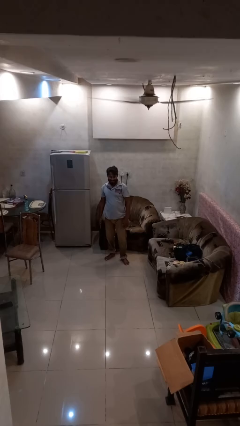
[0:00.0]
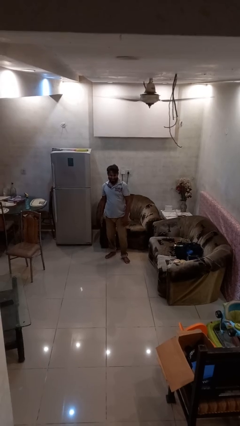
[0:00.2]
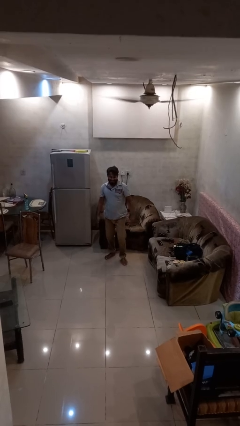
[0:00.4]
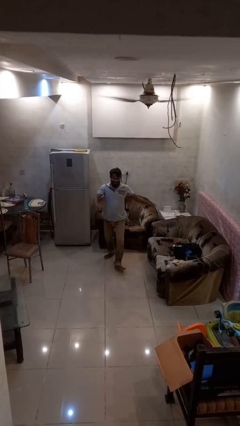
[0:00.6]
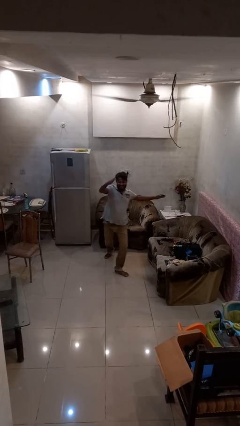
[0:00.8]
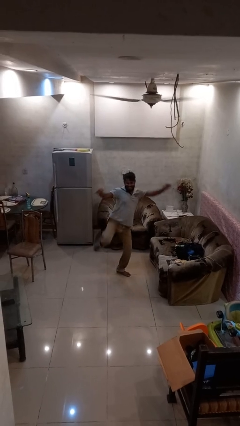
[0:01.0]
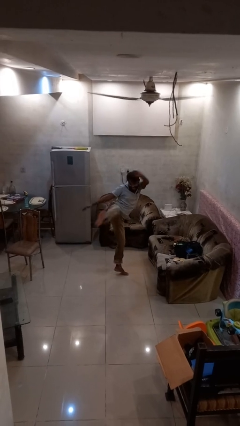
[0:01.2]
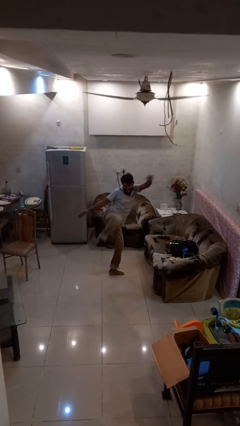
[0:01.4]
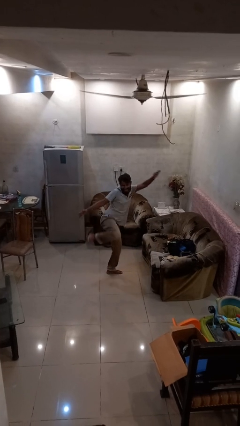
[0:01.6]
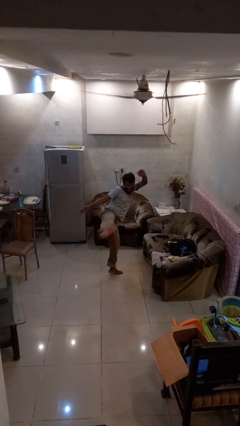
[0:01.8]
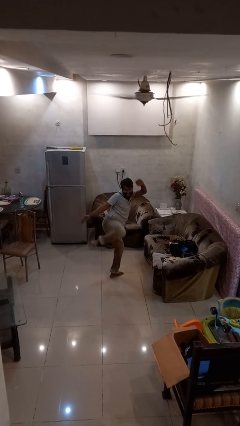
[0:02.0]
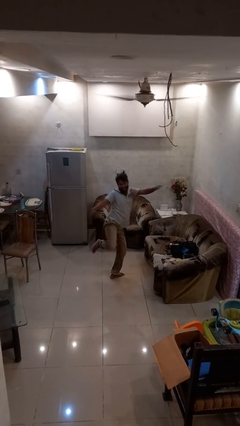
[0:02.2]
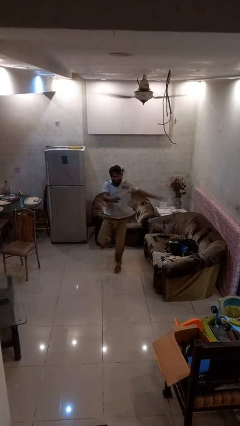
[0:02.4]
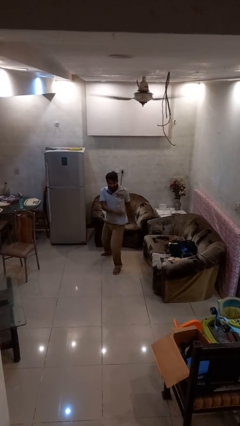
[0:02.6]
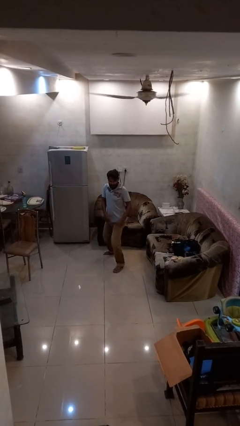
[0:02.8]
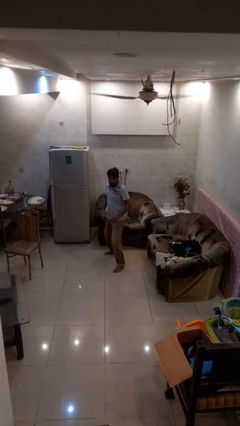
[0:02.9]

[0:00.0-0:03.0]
person karate kicks

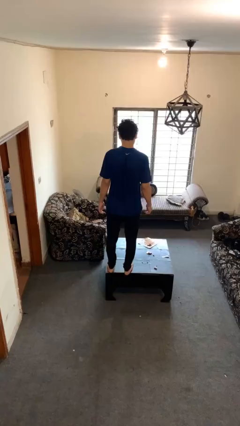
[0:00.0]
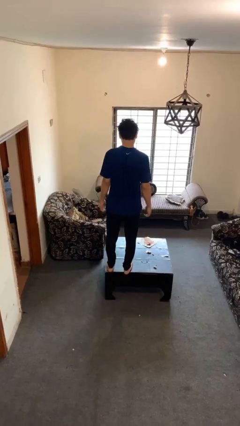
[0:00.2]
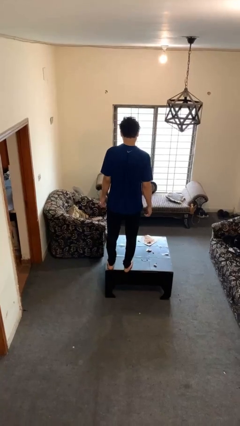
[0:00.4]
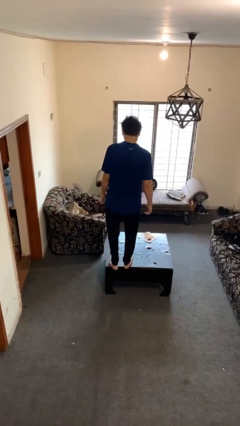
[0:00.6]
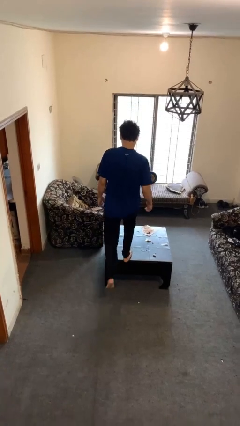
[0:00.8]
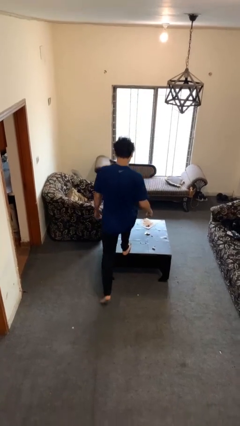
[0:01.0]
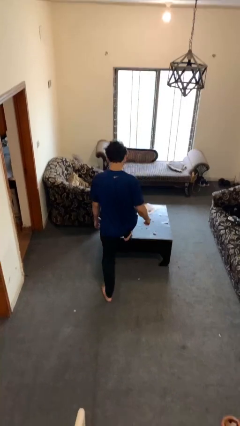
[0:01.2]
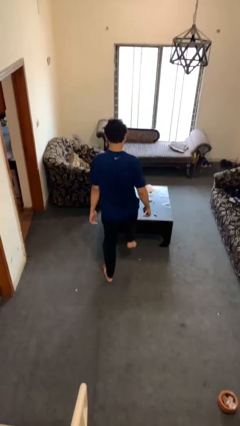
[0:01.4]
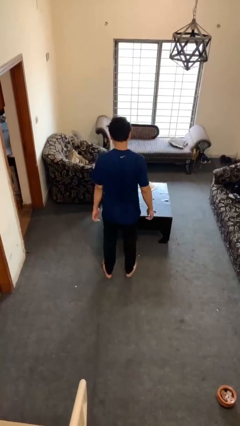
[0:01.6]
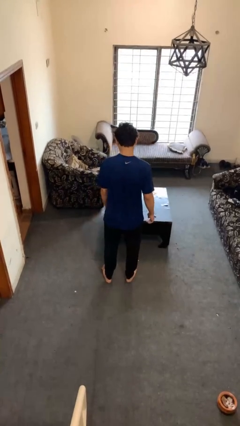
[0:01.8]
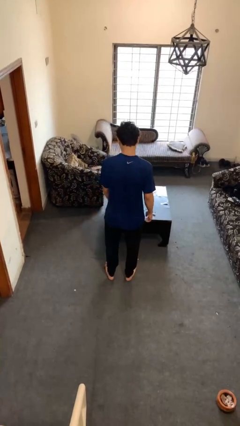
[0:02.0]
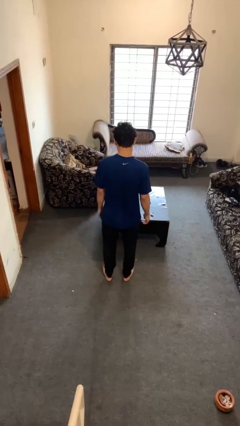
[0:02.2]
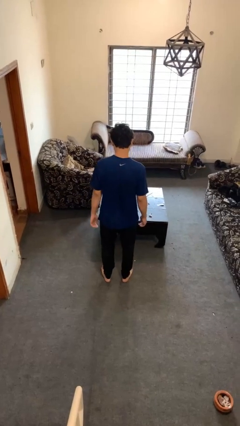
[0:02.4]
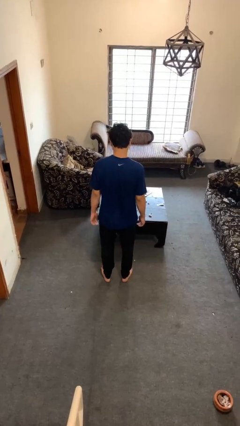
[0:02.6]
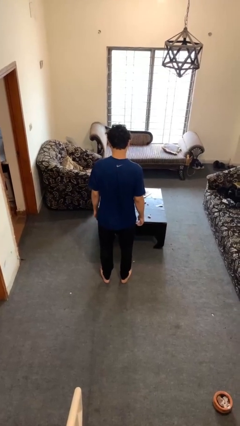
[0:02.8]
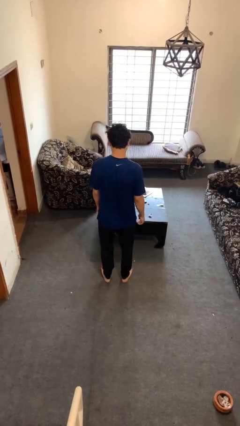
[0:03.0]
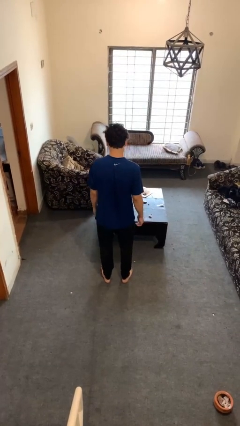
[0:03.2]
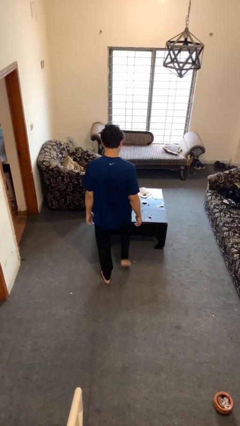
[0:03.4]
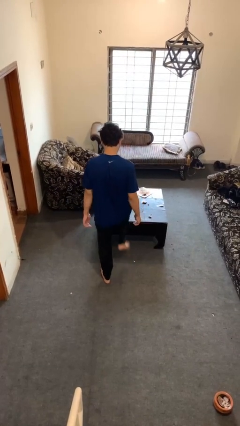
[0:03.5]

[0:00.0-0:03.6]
person climbs off table

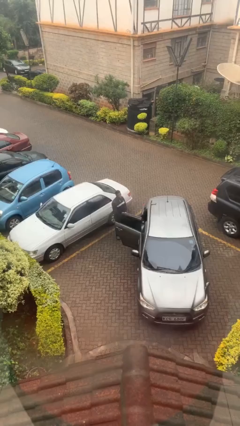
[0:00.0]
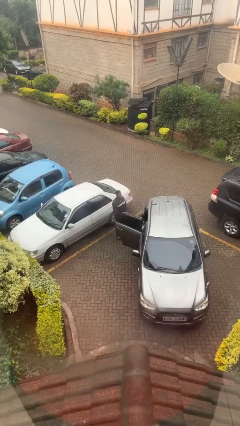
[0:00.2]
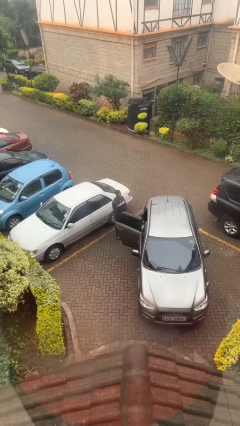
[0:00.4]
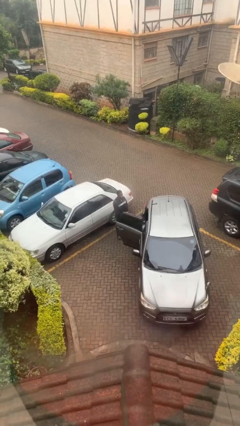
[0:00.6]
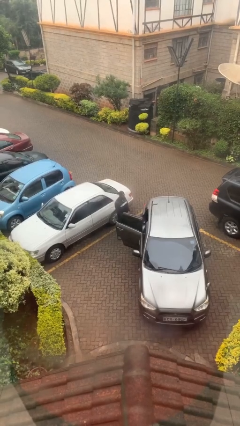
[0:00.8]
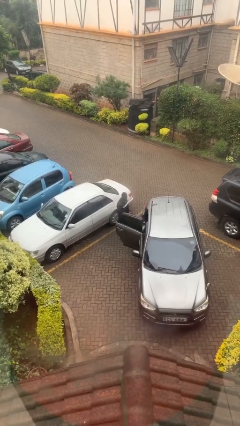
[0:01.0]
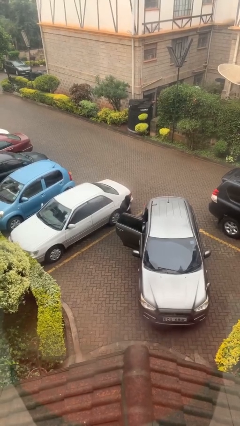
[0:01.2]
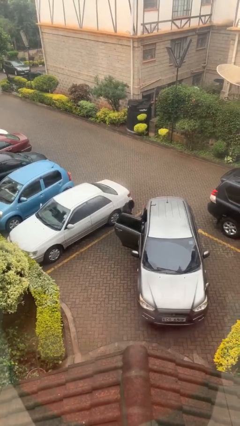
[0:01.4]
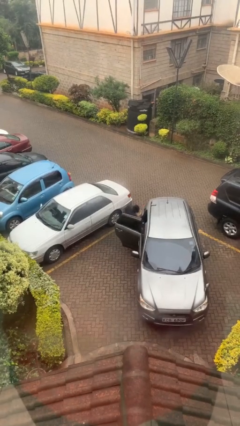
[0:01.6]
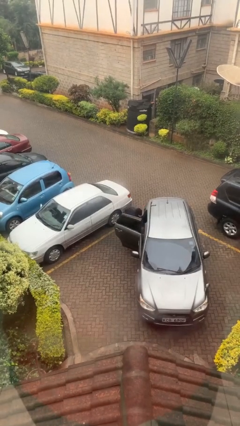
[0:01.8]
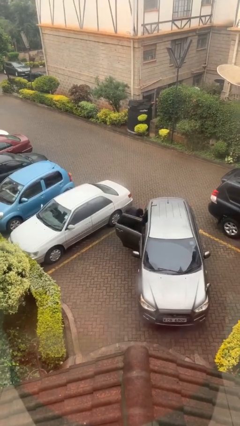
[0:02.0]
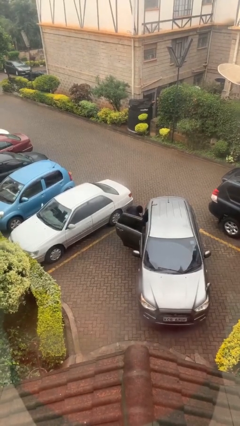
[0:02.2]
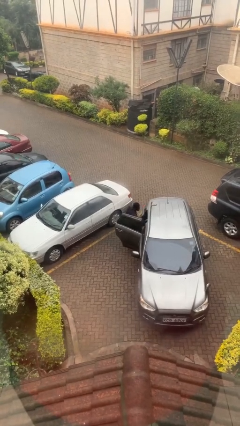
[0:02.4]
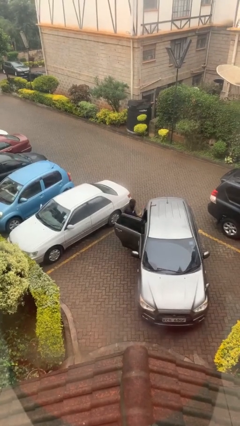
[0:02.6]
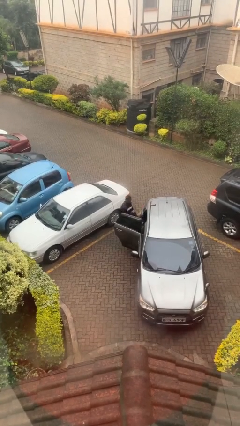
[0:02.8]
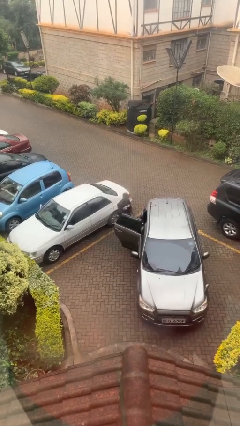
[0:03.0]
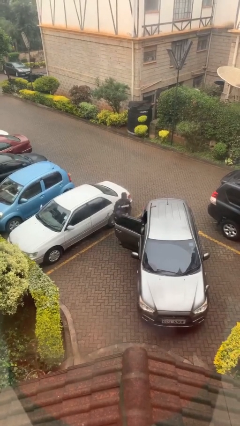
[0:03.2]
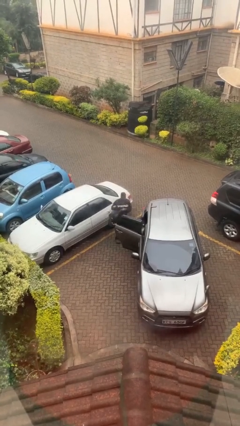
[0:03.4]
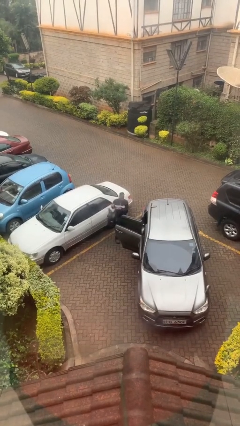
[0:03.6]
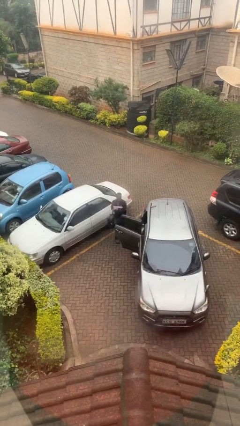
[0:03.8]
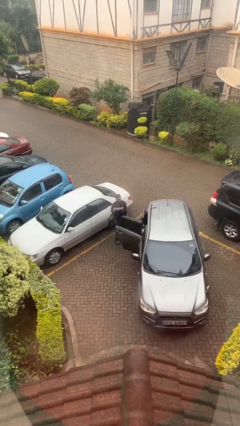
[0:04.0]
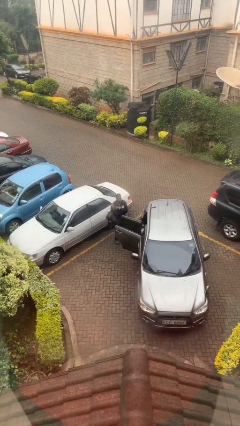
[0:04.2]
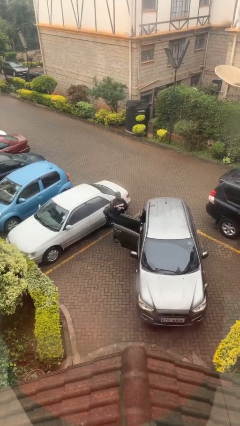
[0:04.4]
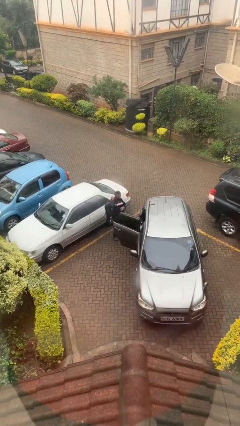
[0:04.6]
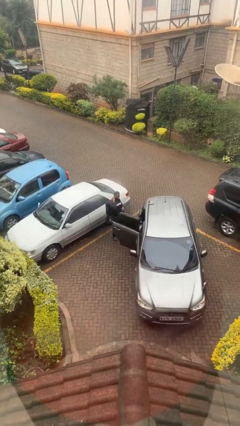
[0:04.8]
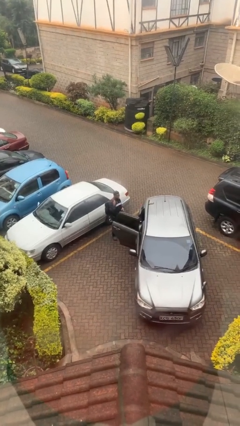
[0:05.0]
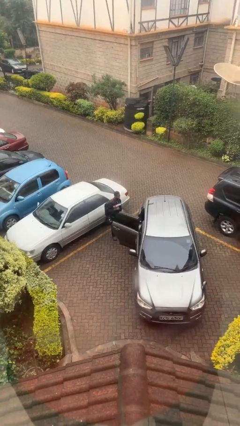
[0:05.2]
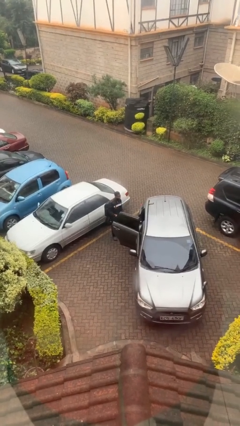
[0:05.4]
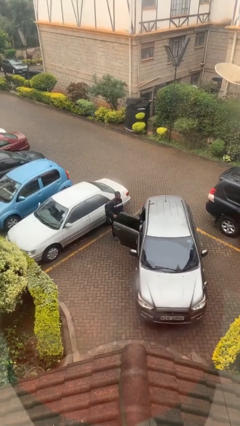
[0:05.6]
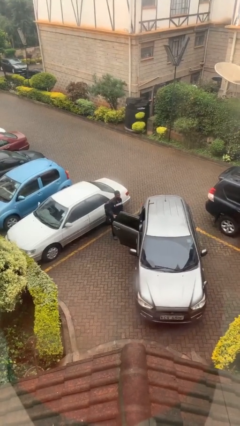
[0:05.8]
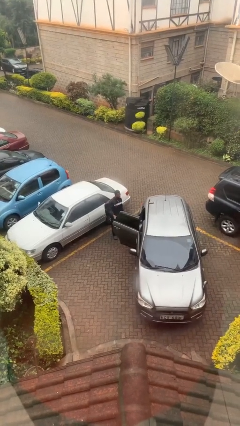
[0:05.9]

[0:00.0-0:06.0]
person unloads car

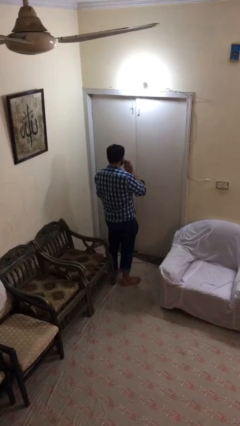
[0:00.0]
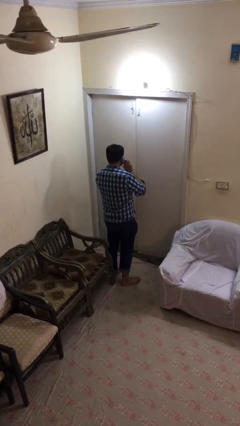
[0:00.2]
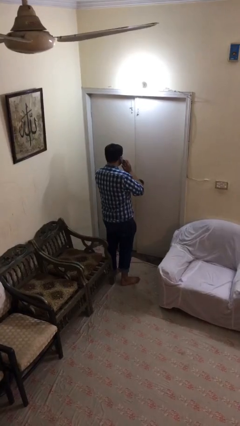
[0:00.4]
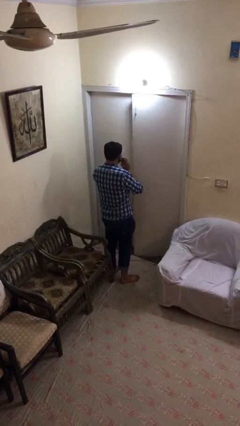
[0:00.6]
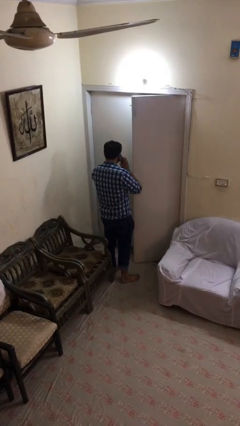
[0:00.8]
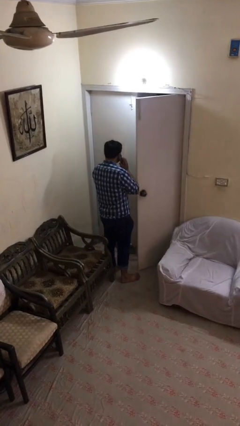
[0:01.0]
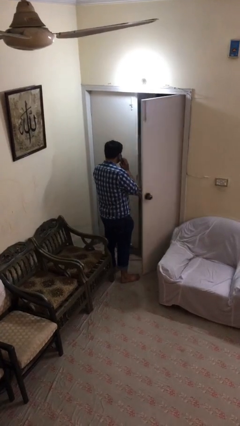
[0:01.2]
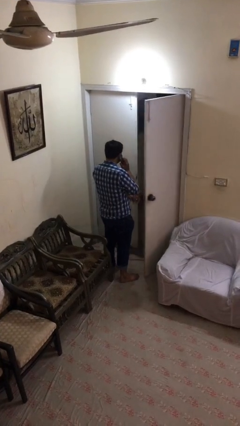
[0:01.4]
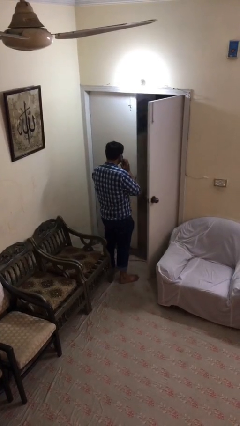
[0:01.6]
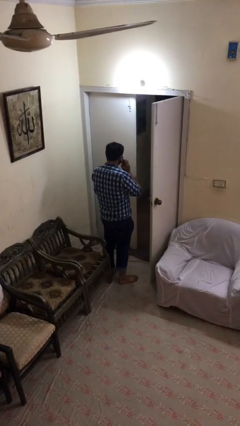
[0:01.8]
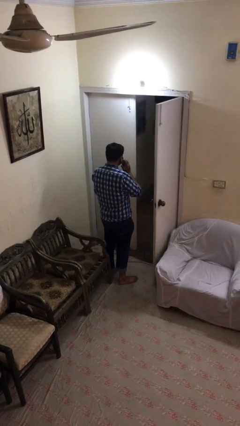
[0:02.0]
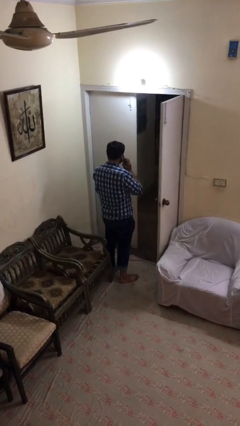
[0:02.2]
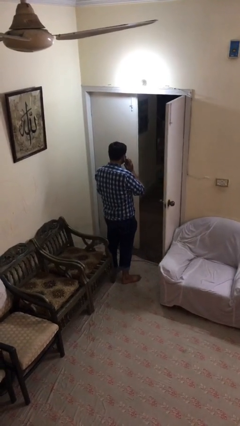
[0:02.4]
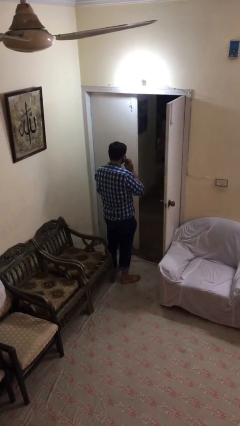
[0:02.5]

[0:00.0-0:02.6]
person opens facility door

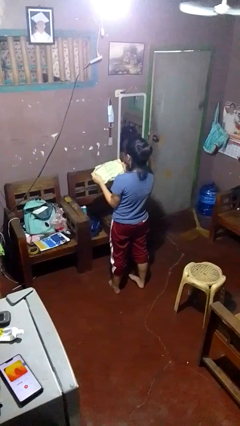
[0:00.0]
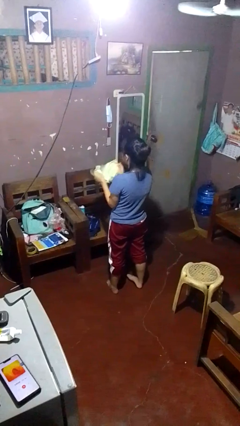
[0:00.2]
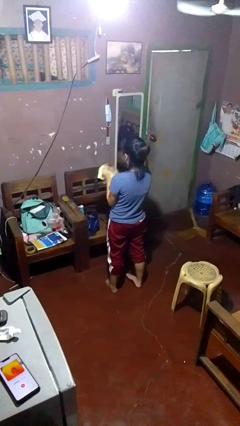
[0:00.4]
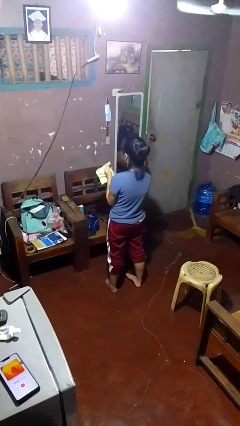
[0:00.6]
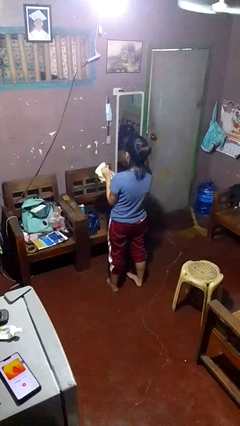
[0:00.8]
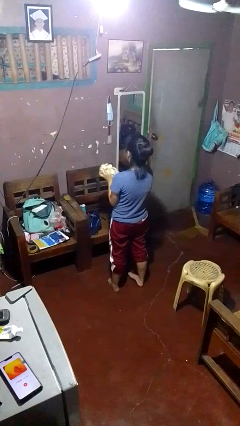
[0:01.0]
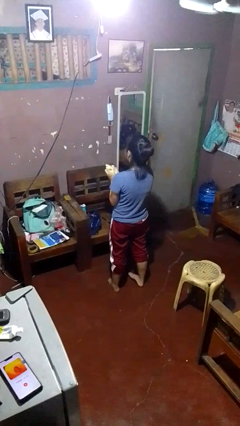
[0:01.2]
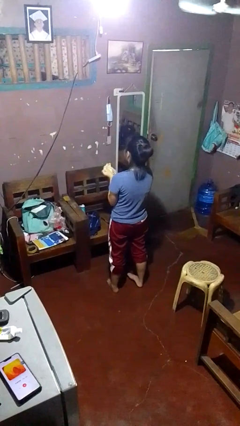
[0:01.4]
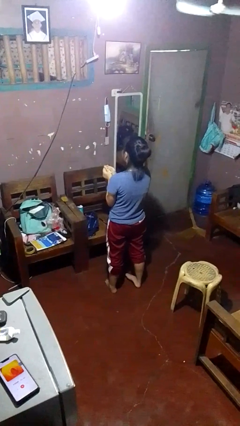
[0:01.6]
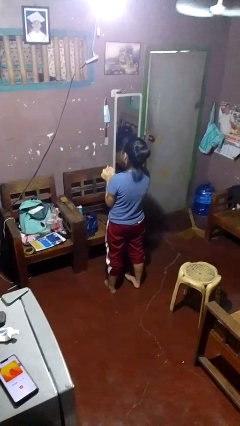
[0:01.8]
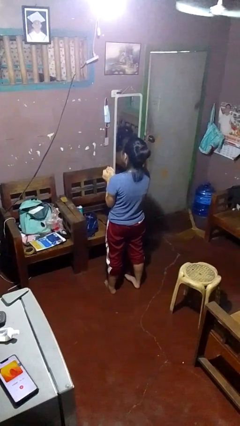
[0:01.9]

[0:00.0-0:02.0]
person crumples paper

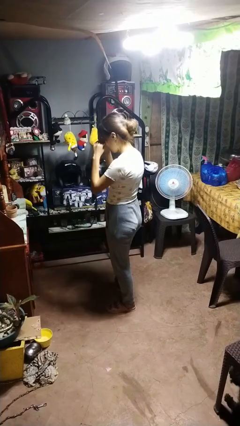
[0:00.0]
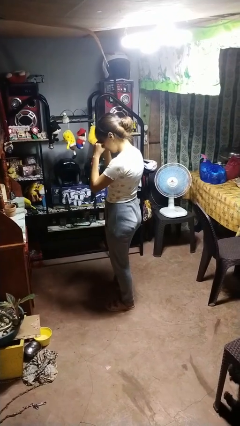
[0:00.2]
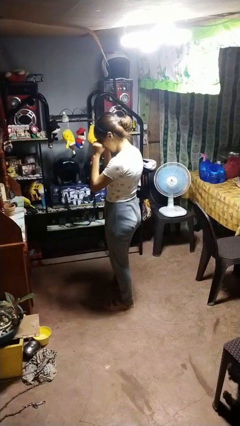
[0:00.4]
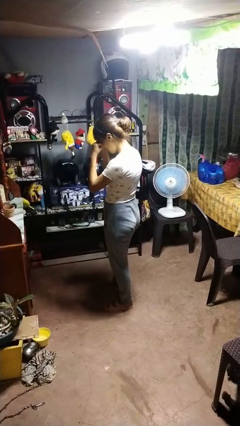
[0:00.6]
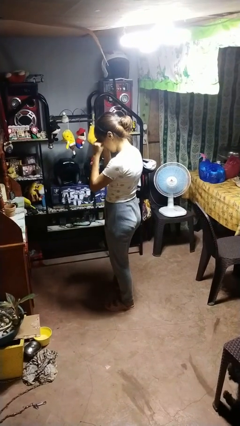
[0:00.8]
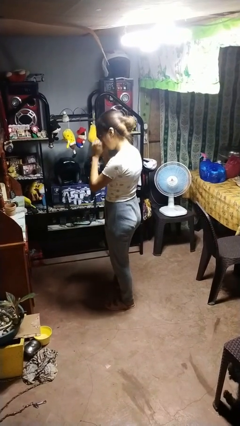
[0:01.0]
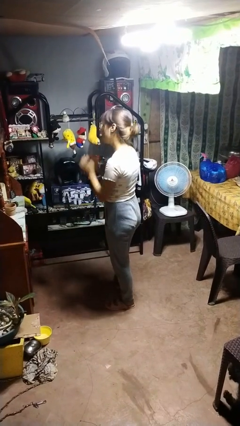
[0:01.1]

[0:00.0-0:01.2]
person rubs eyes
